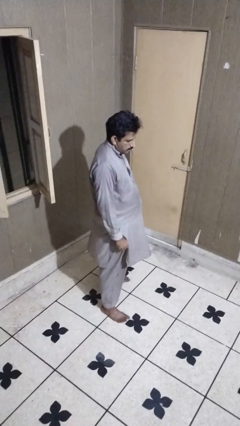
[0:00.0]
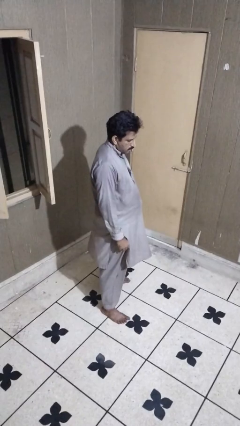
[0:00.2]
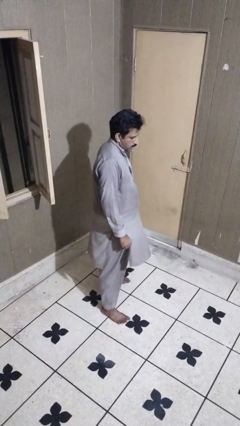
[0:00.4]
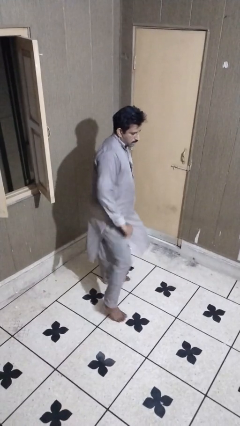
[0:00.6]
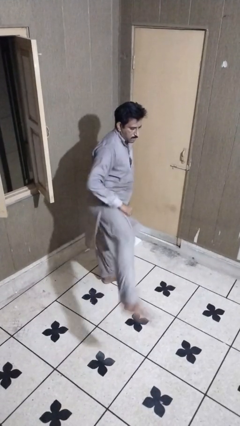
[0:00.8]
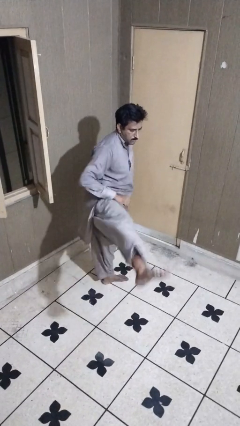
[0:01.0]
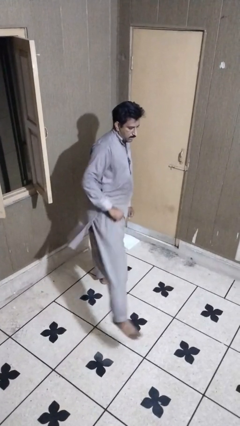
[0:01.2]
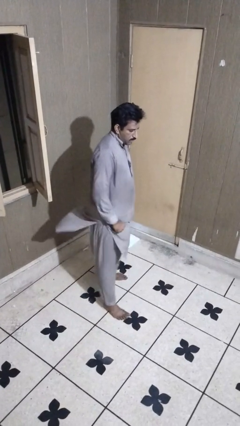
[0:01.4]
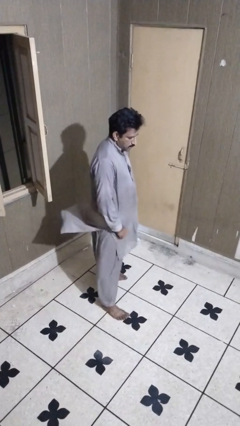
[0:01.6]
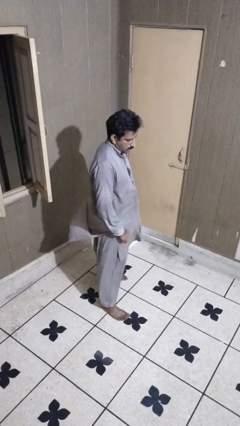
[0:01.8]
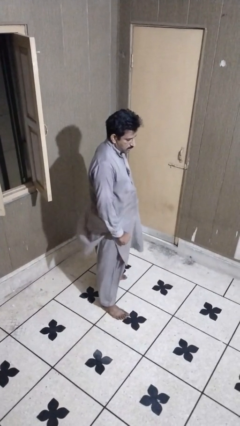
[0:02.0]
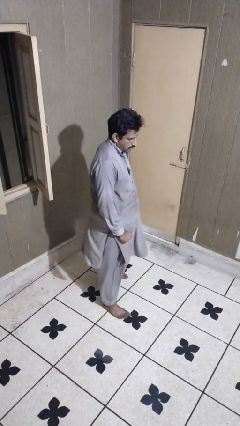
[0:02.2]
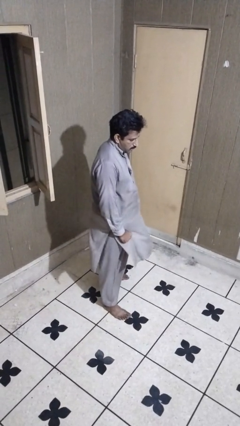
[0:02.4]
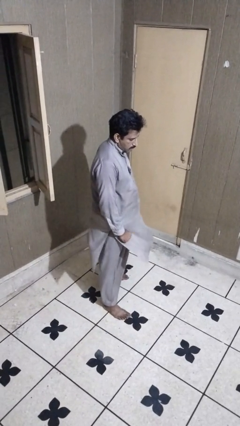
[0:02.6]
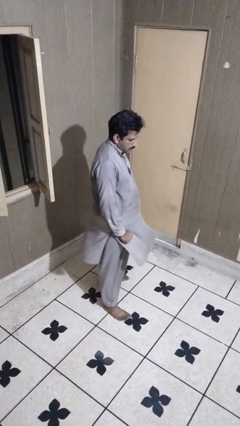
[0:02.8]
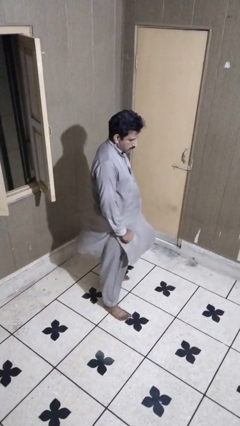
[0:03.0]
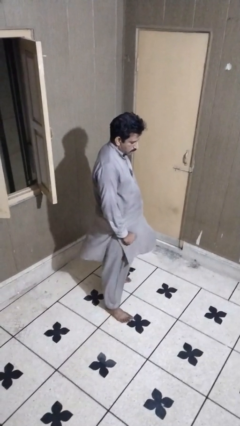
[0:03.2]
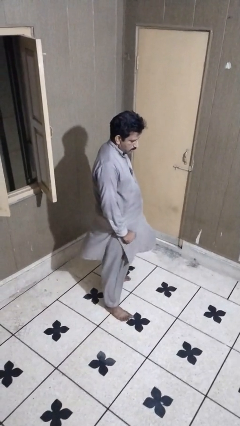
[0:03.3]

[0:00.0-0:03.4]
person karate kicks

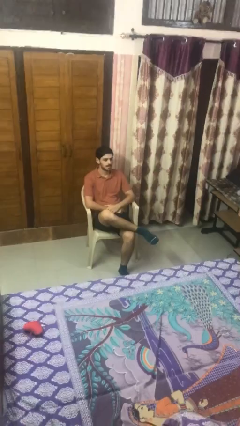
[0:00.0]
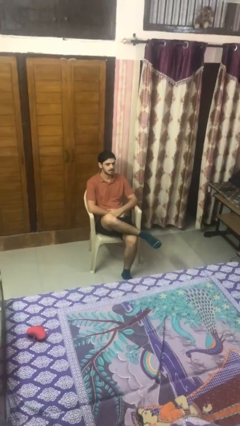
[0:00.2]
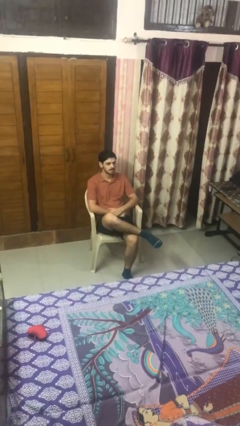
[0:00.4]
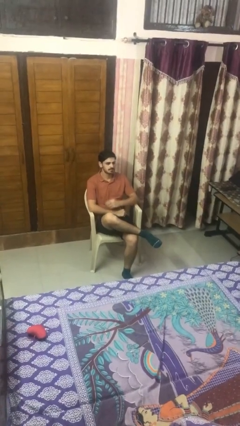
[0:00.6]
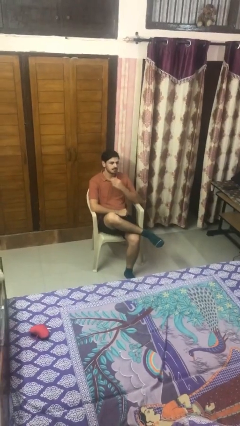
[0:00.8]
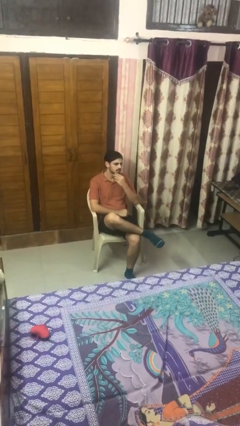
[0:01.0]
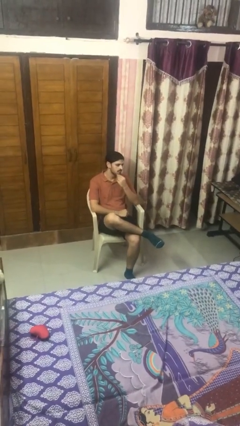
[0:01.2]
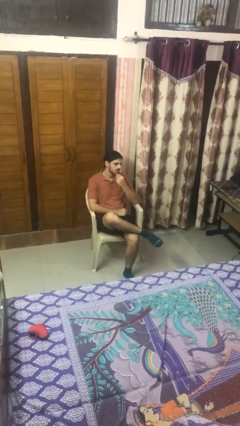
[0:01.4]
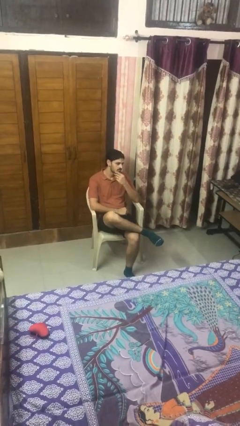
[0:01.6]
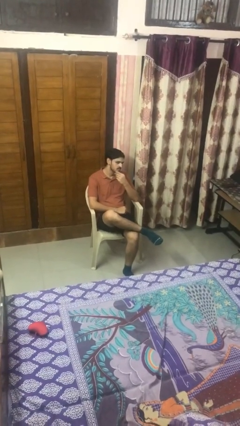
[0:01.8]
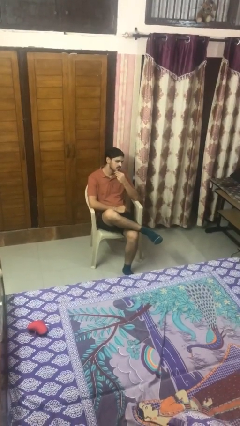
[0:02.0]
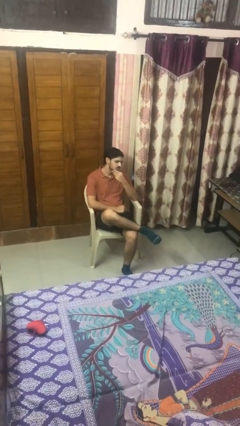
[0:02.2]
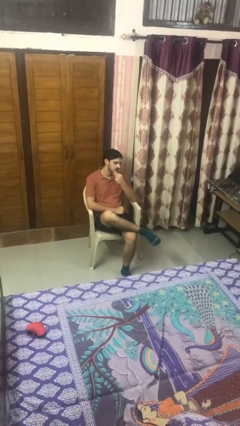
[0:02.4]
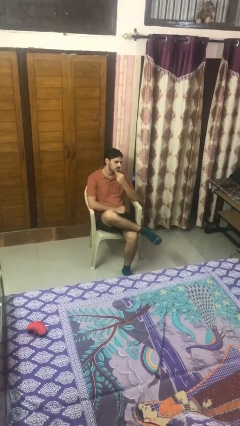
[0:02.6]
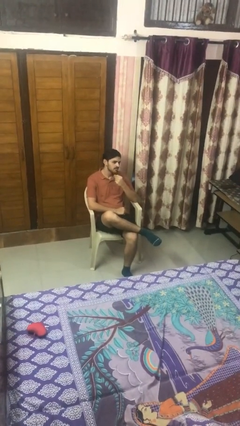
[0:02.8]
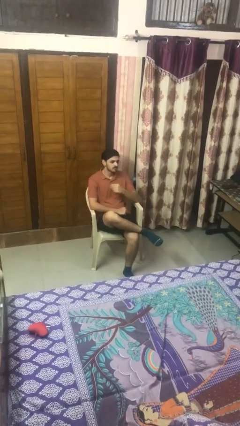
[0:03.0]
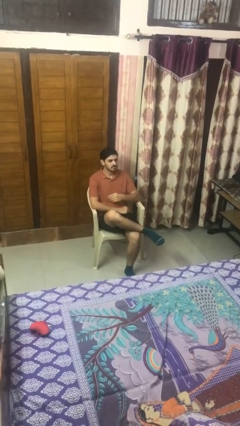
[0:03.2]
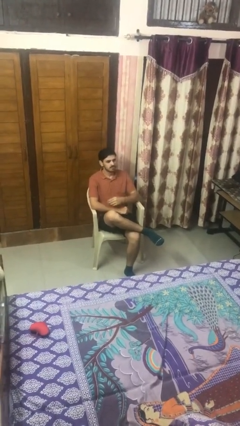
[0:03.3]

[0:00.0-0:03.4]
person strokes chin

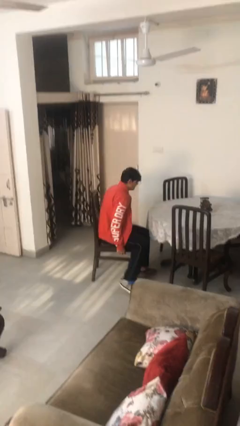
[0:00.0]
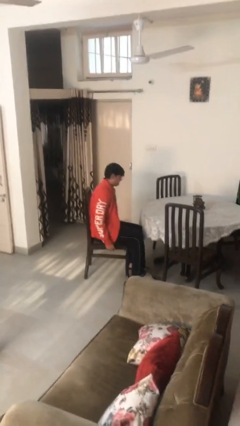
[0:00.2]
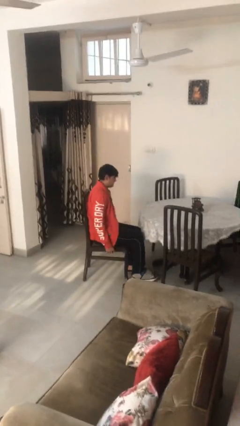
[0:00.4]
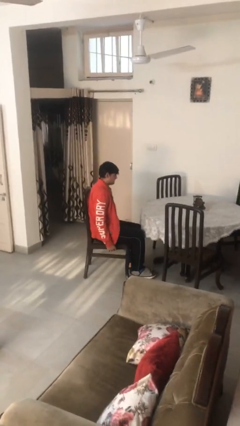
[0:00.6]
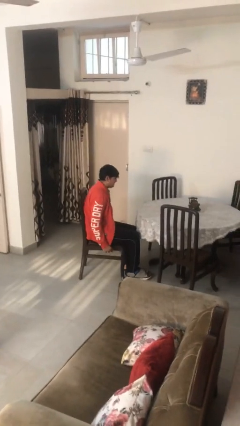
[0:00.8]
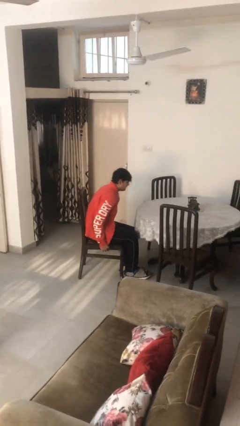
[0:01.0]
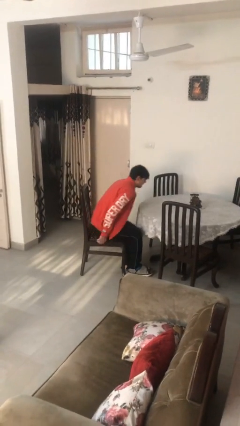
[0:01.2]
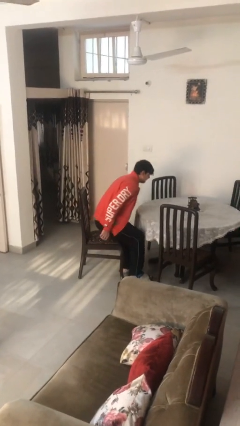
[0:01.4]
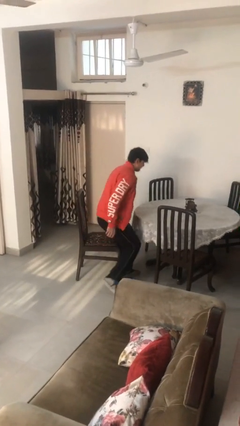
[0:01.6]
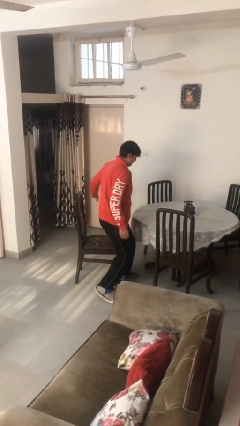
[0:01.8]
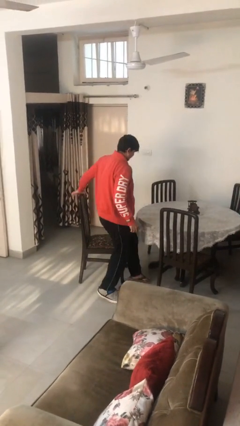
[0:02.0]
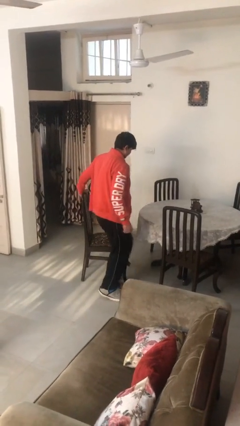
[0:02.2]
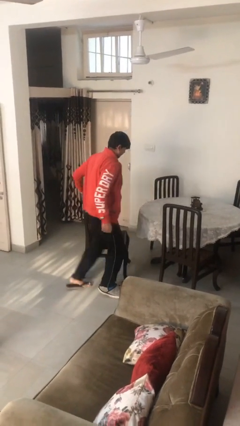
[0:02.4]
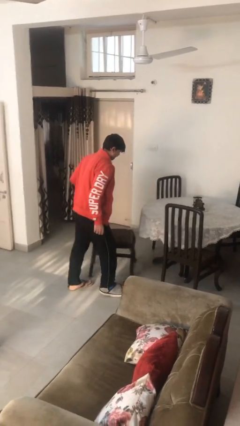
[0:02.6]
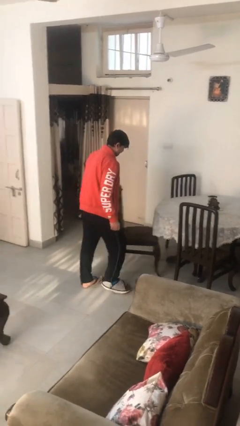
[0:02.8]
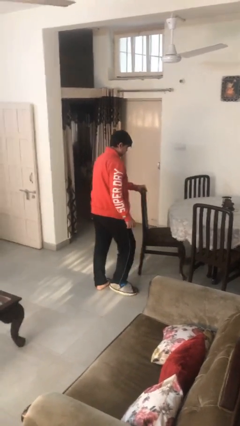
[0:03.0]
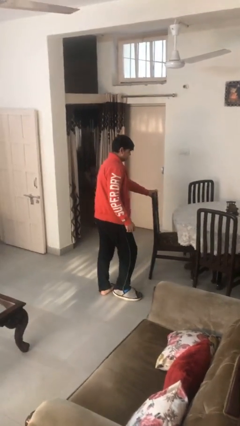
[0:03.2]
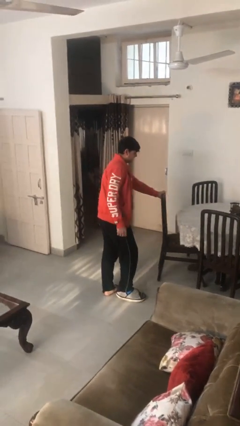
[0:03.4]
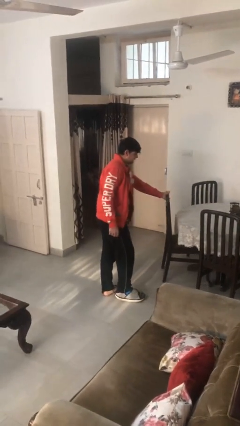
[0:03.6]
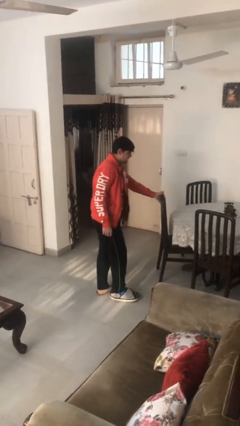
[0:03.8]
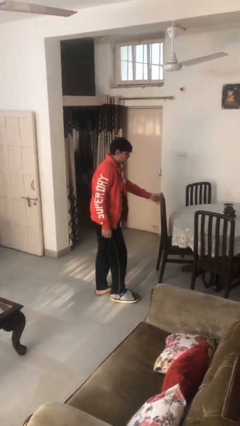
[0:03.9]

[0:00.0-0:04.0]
person stands up

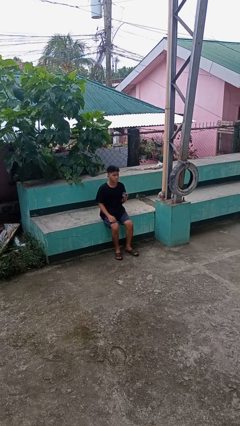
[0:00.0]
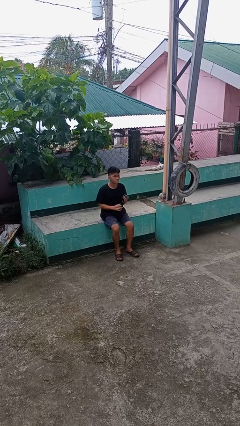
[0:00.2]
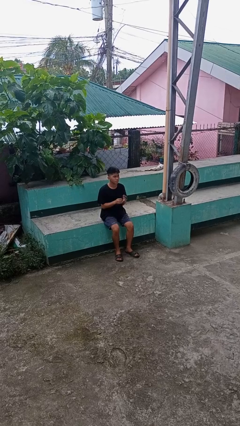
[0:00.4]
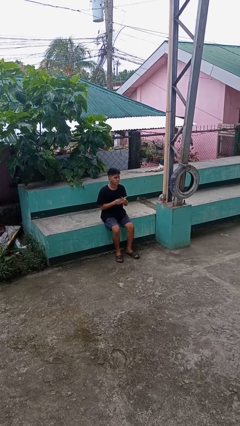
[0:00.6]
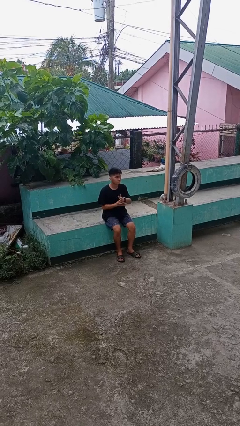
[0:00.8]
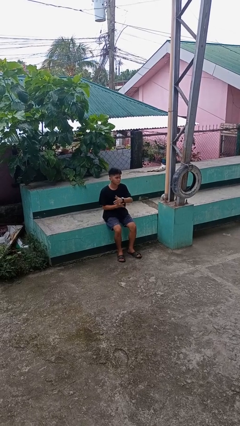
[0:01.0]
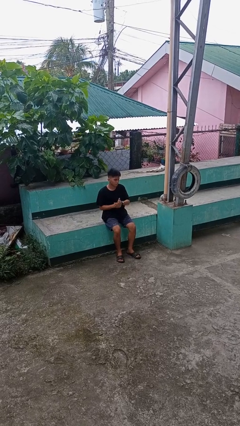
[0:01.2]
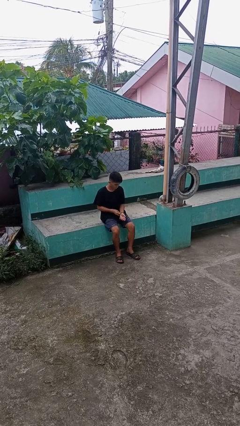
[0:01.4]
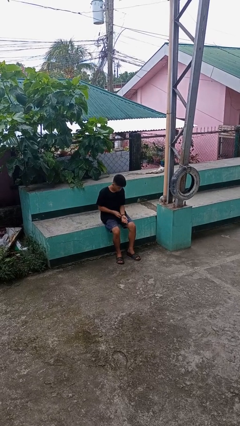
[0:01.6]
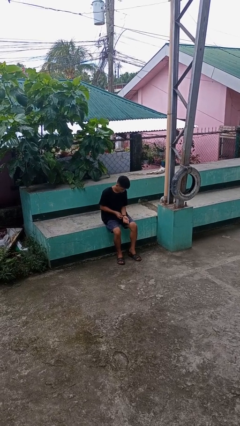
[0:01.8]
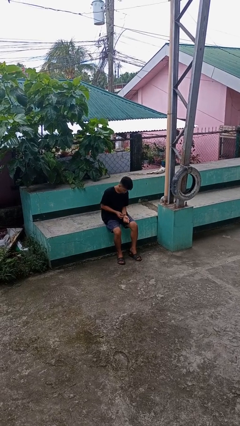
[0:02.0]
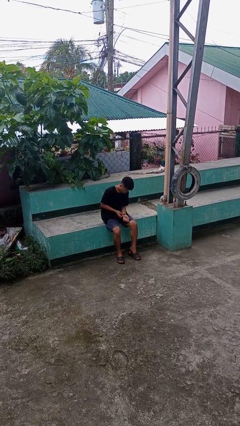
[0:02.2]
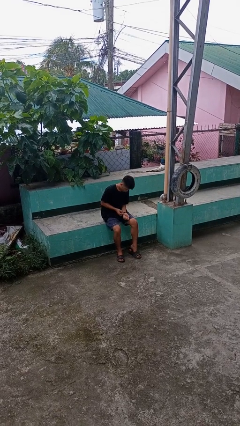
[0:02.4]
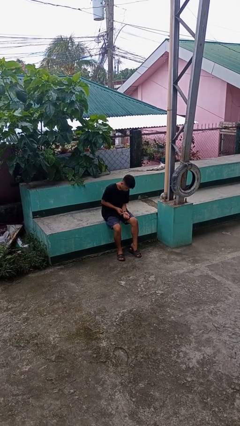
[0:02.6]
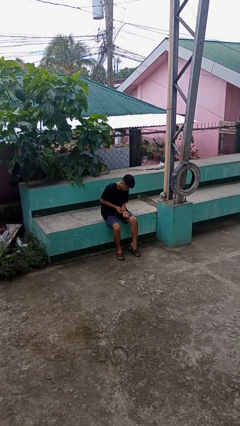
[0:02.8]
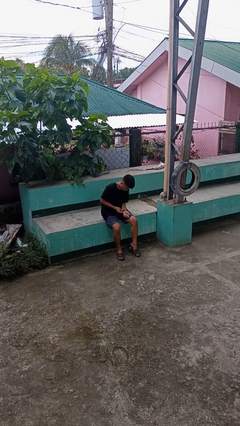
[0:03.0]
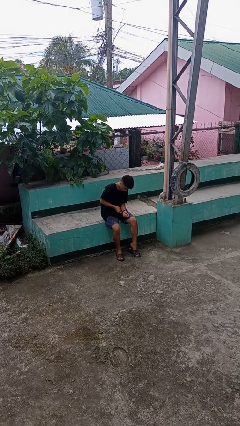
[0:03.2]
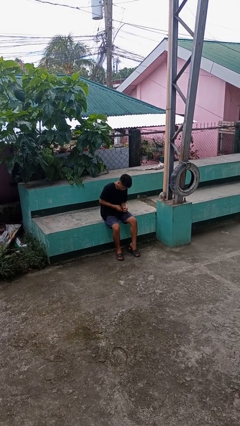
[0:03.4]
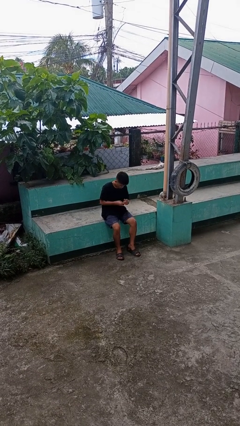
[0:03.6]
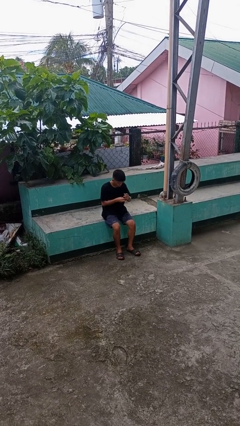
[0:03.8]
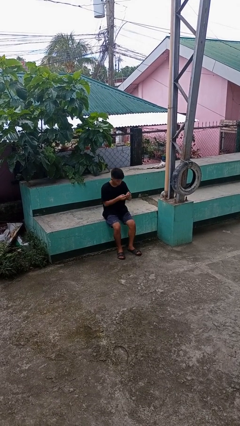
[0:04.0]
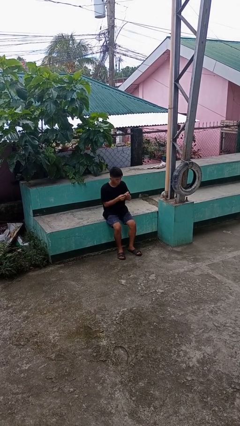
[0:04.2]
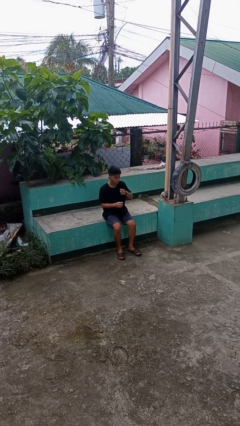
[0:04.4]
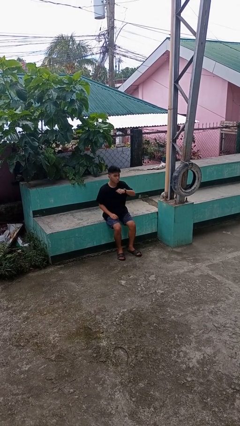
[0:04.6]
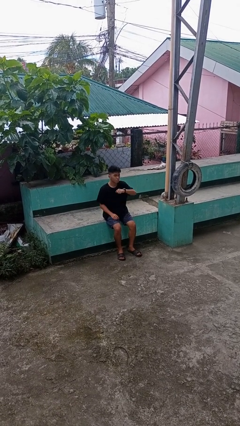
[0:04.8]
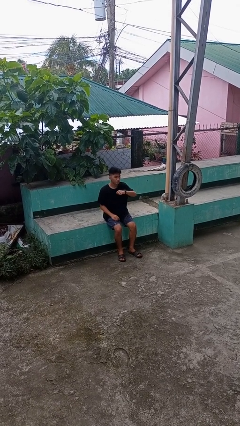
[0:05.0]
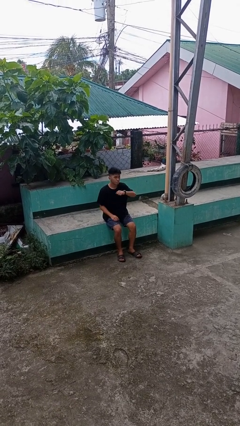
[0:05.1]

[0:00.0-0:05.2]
person puts on wristwatch

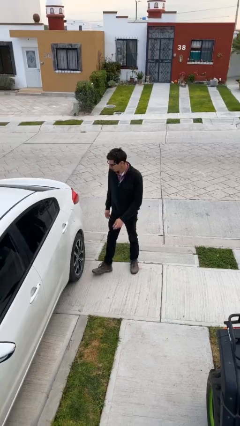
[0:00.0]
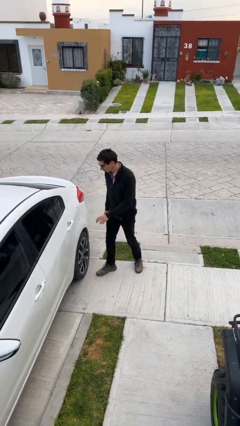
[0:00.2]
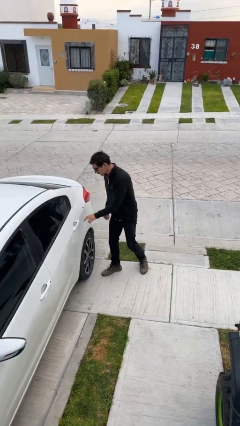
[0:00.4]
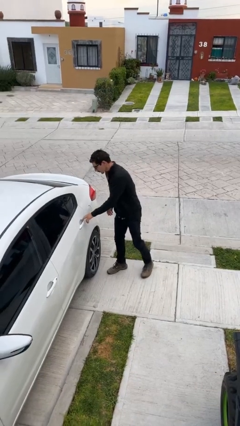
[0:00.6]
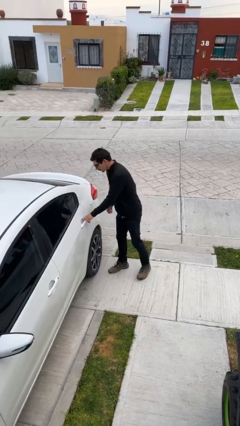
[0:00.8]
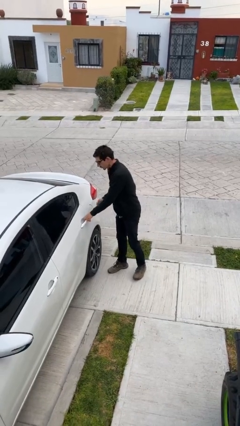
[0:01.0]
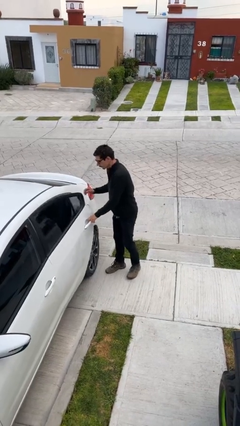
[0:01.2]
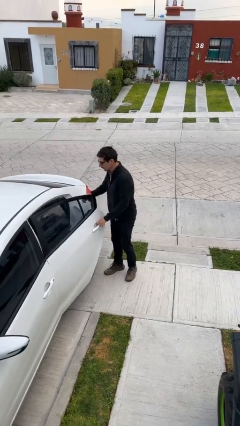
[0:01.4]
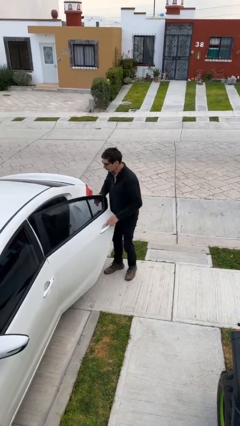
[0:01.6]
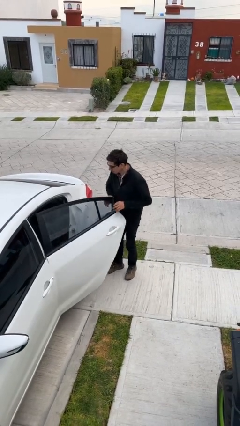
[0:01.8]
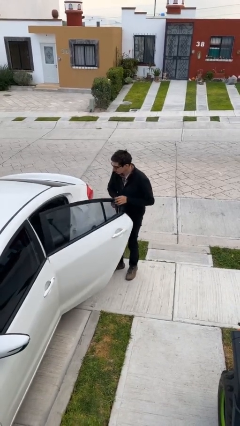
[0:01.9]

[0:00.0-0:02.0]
person opens car door
